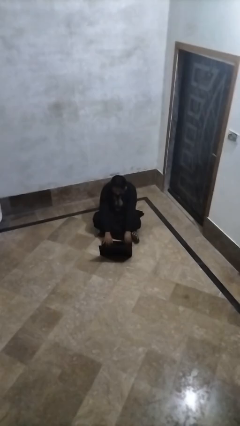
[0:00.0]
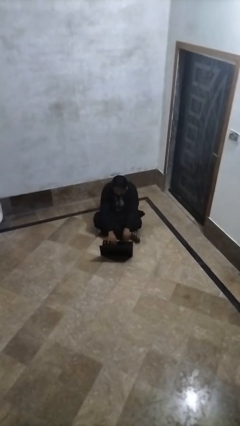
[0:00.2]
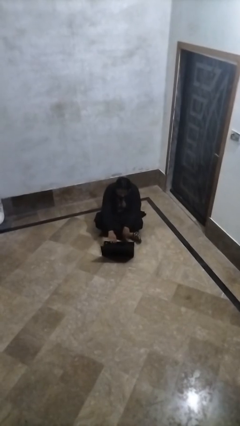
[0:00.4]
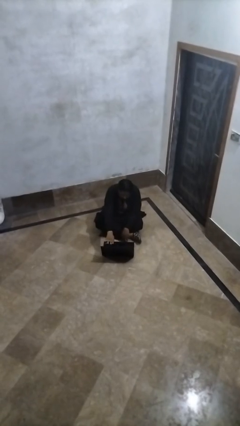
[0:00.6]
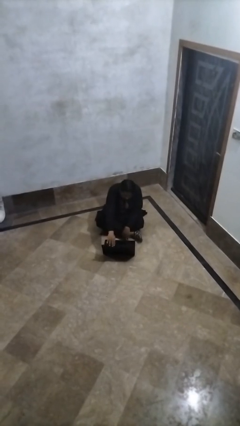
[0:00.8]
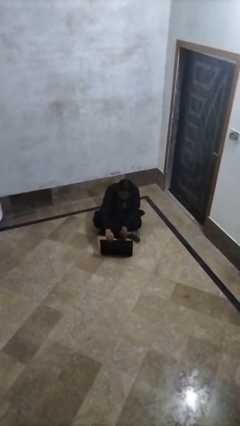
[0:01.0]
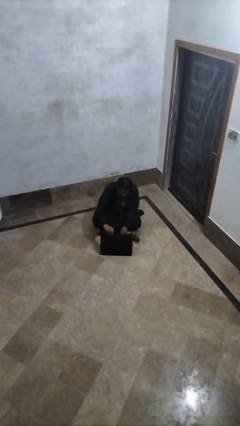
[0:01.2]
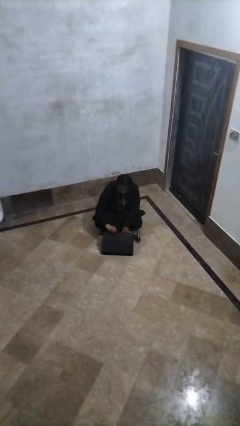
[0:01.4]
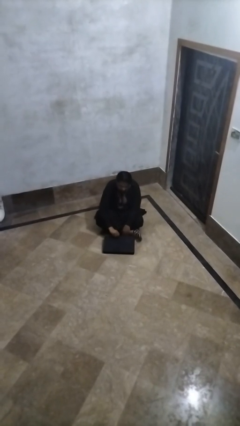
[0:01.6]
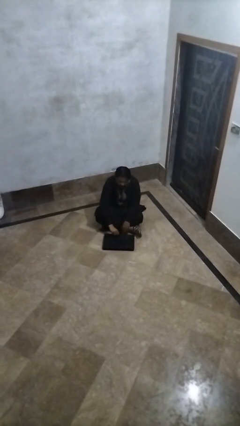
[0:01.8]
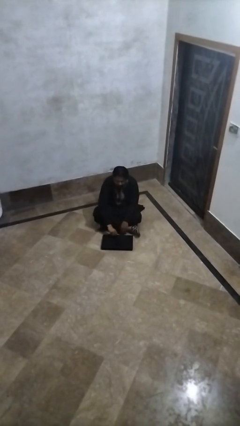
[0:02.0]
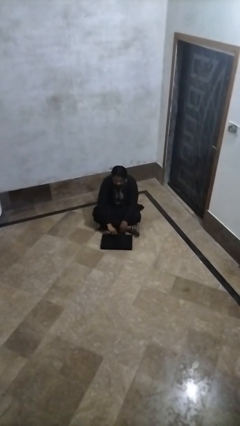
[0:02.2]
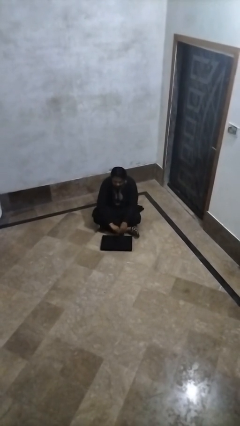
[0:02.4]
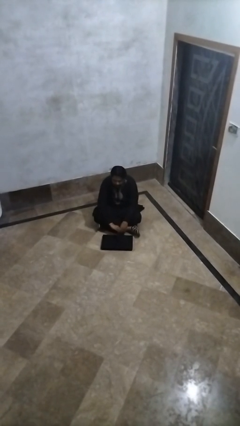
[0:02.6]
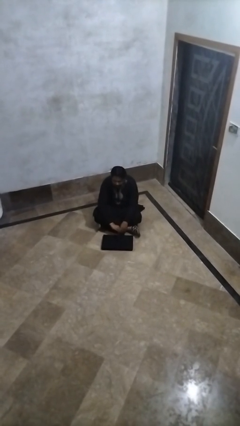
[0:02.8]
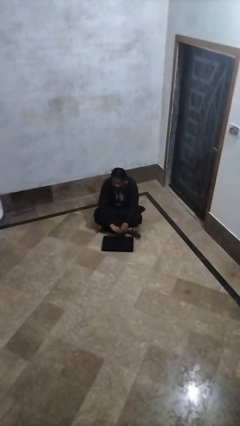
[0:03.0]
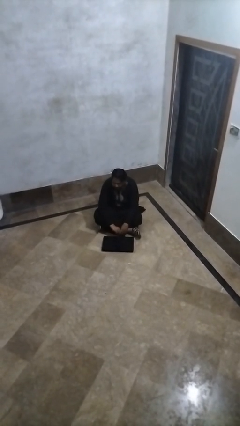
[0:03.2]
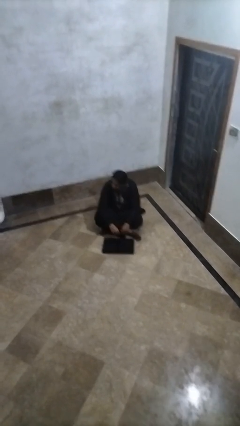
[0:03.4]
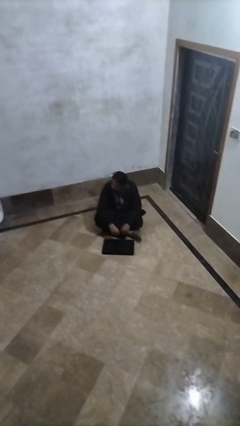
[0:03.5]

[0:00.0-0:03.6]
person closes laptop

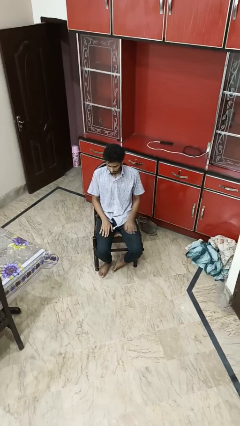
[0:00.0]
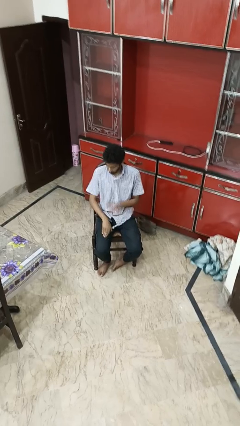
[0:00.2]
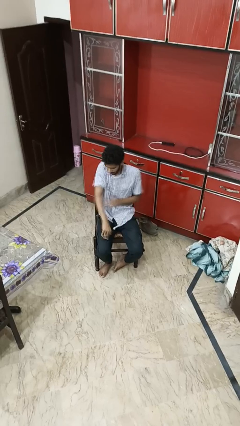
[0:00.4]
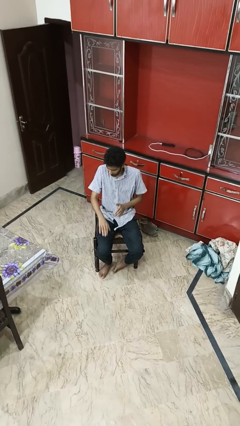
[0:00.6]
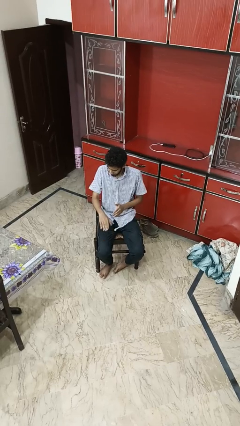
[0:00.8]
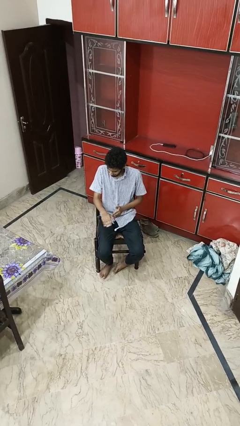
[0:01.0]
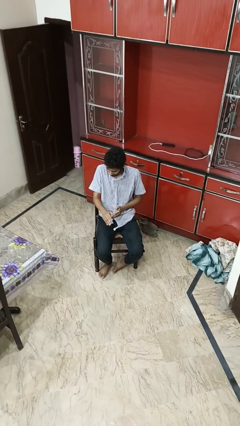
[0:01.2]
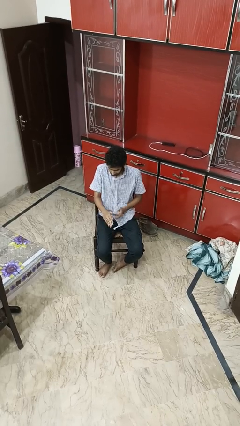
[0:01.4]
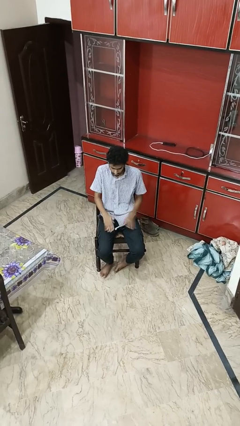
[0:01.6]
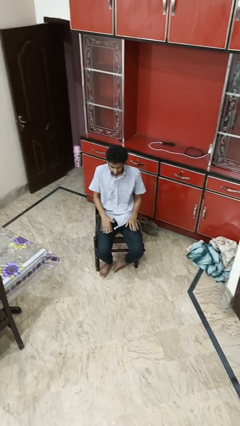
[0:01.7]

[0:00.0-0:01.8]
person swats bug

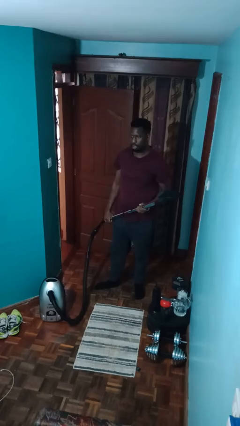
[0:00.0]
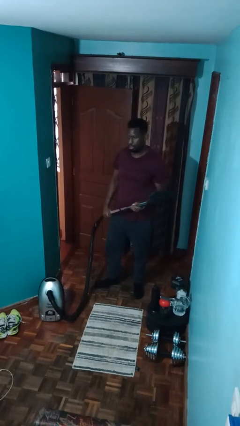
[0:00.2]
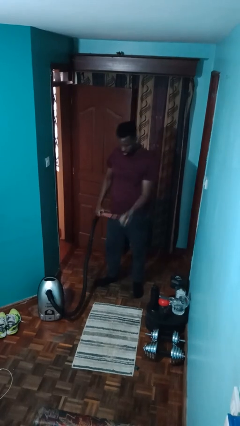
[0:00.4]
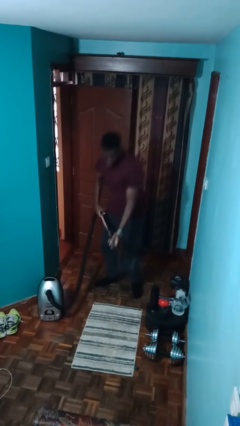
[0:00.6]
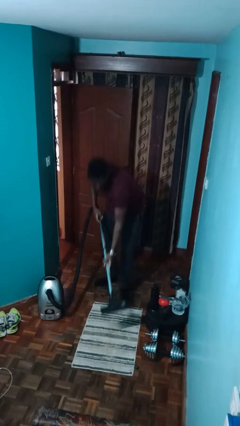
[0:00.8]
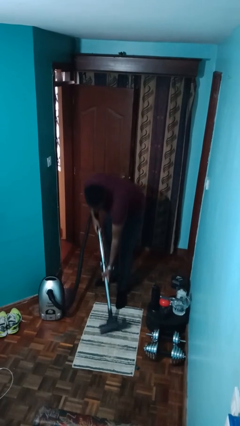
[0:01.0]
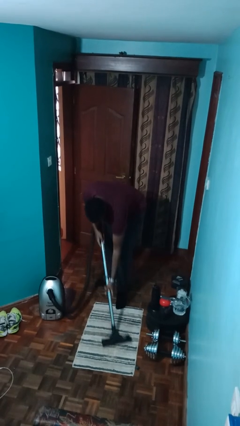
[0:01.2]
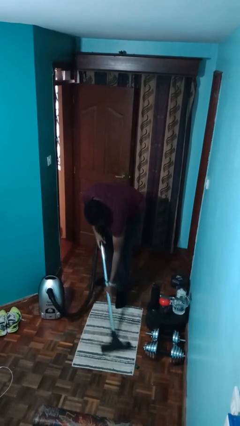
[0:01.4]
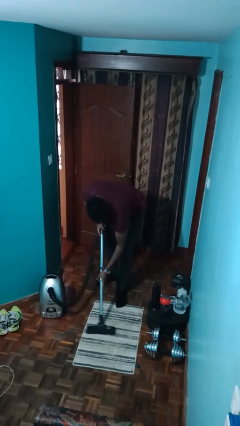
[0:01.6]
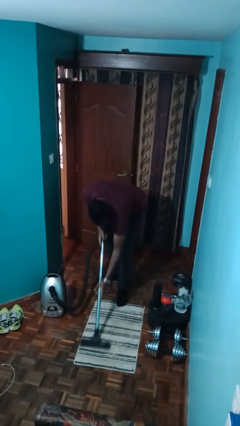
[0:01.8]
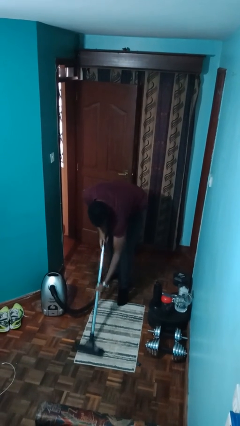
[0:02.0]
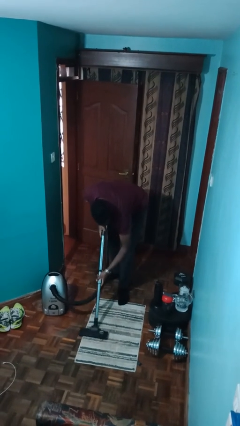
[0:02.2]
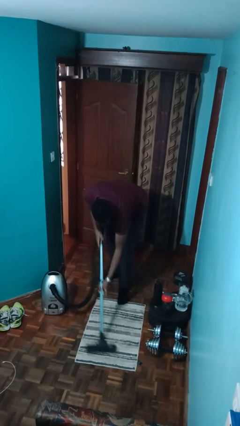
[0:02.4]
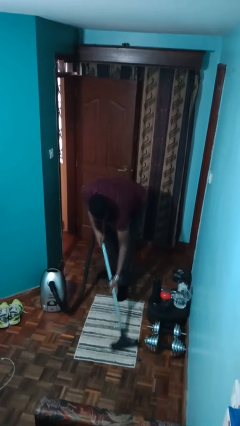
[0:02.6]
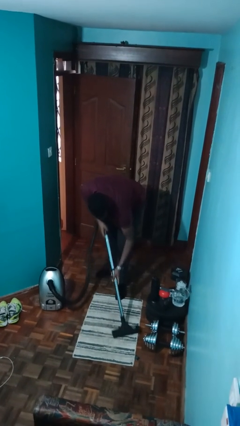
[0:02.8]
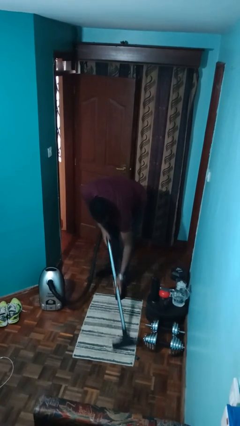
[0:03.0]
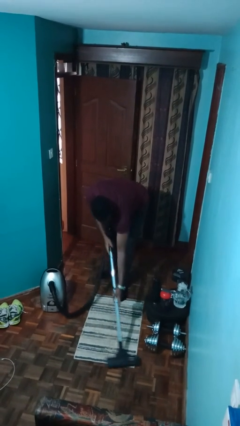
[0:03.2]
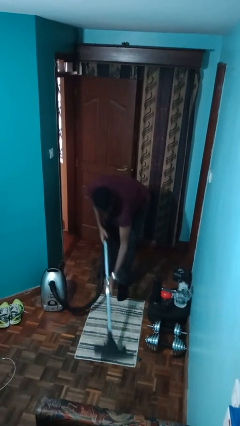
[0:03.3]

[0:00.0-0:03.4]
person vacuums carpet

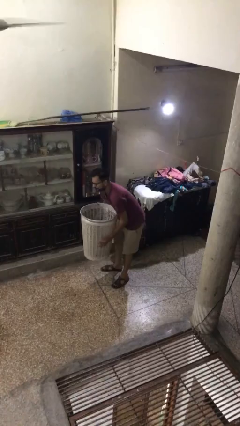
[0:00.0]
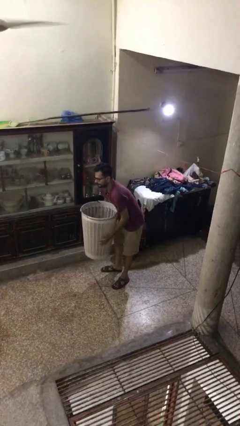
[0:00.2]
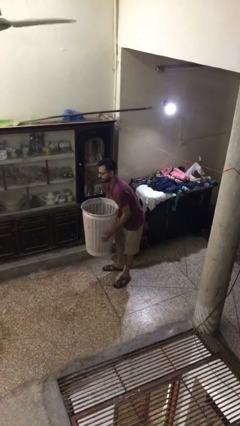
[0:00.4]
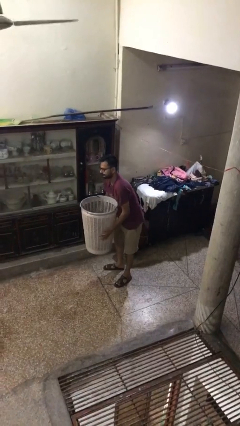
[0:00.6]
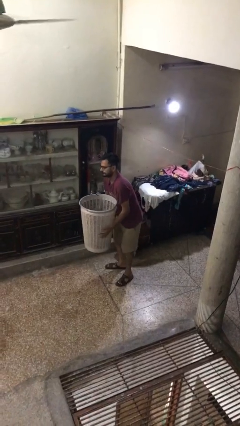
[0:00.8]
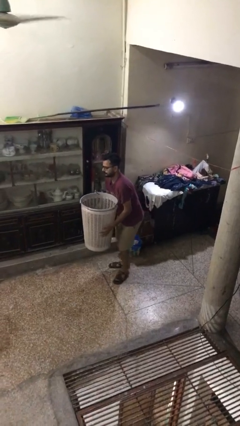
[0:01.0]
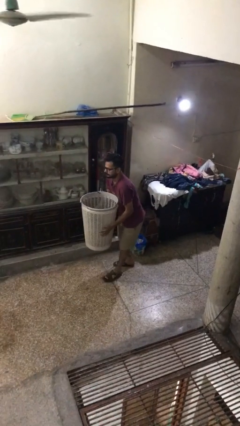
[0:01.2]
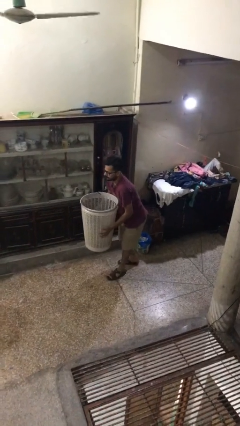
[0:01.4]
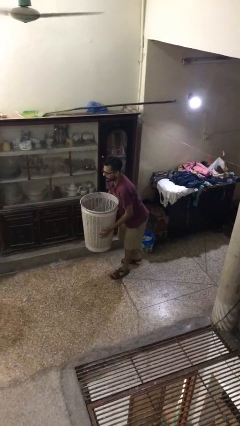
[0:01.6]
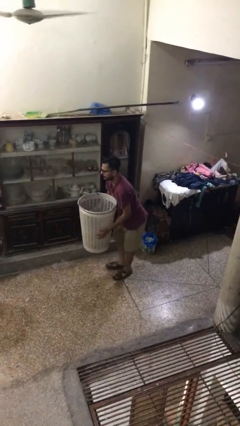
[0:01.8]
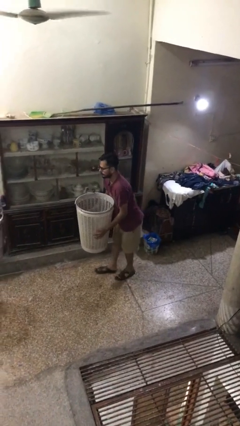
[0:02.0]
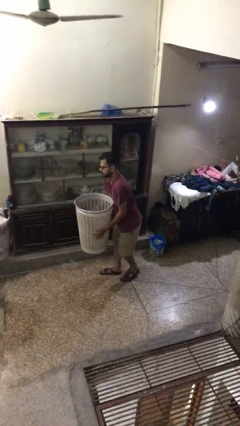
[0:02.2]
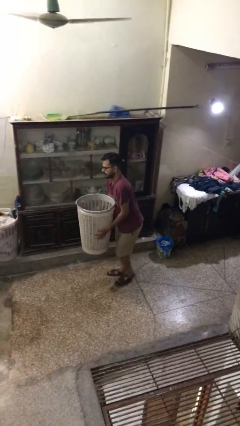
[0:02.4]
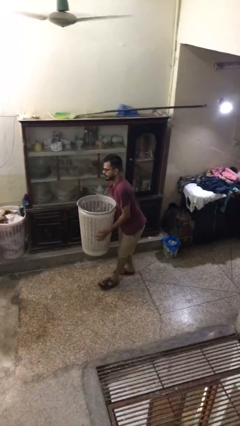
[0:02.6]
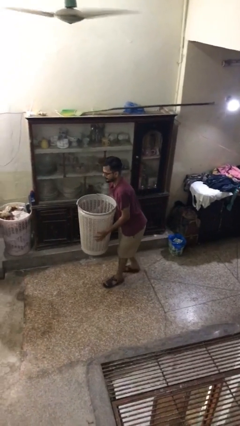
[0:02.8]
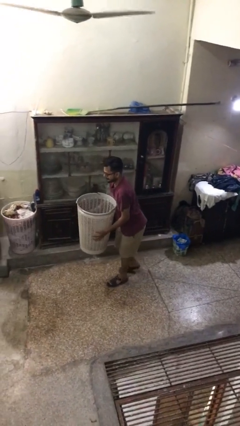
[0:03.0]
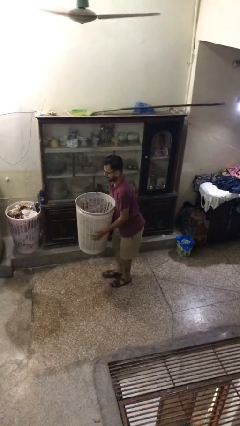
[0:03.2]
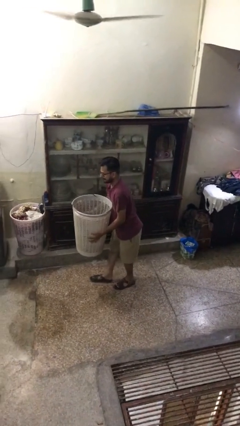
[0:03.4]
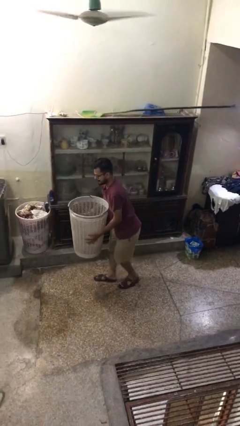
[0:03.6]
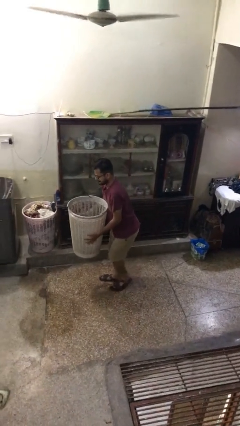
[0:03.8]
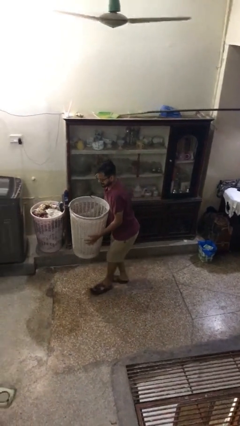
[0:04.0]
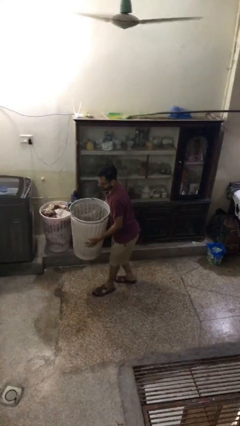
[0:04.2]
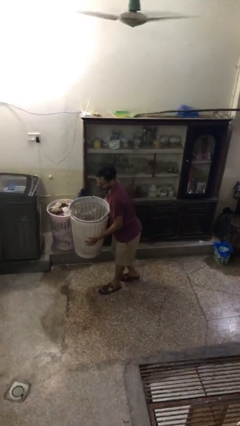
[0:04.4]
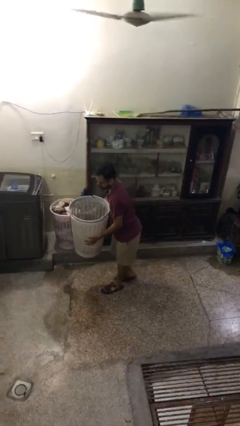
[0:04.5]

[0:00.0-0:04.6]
person carries heavy object

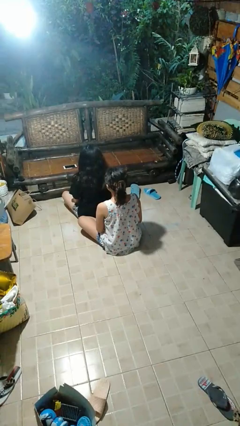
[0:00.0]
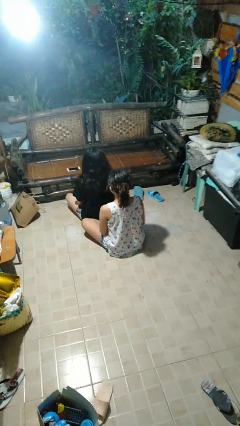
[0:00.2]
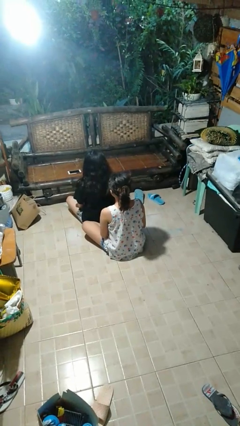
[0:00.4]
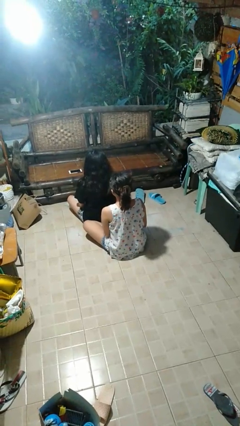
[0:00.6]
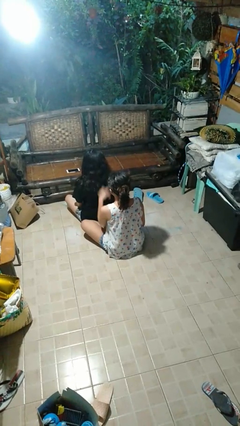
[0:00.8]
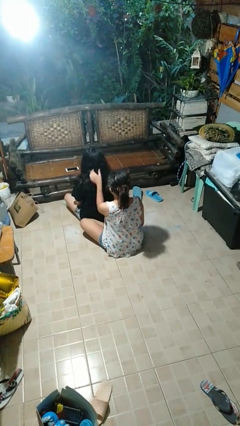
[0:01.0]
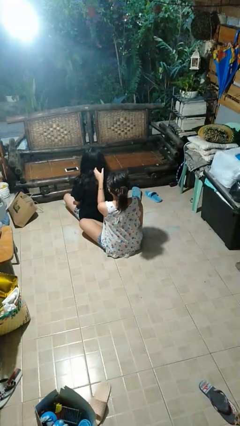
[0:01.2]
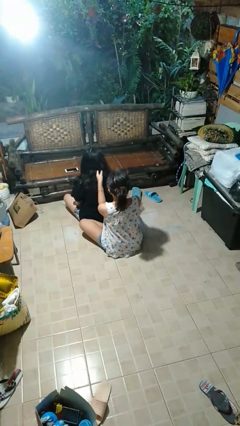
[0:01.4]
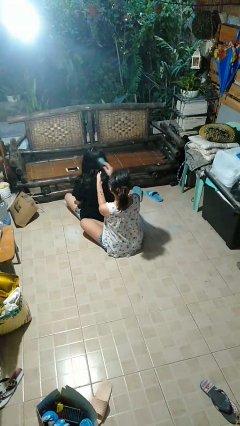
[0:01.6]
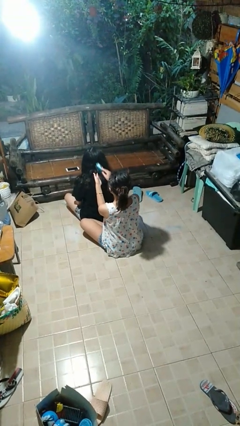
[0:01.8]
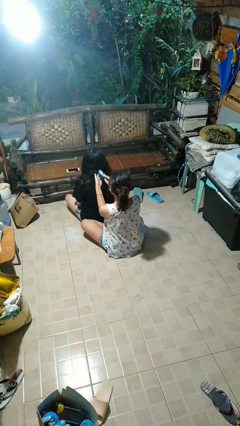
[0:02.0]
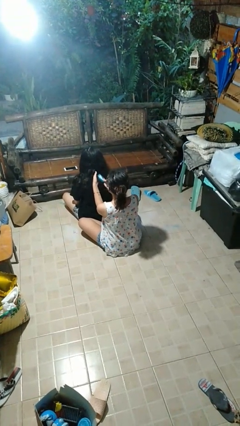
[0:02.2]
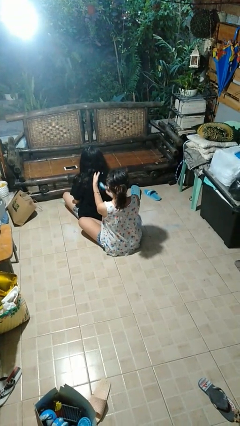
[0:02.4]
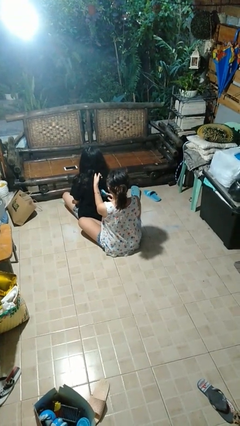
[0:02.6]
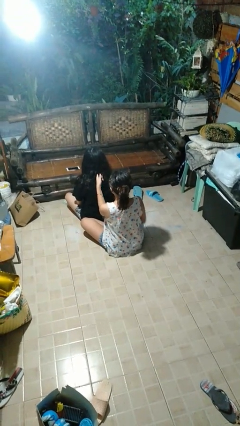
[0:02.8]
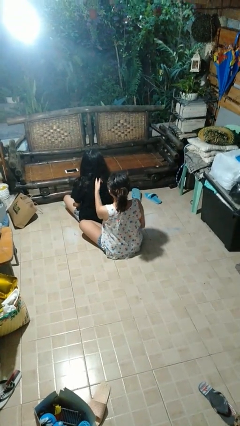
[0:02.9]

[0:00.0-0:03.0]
person brushes hair of person

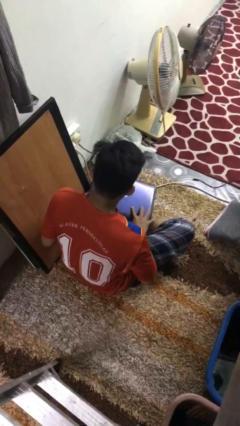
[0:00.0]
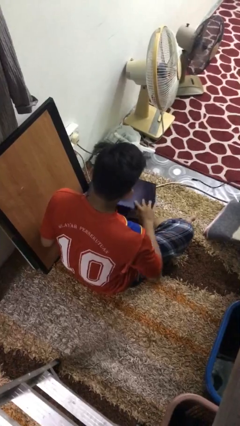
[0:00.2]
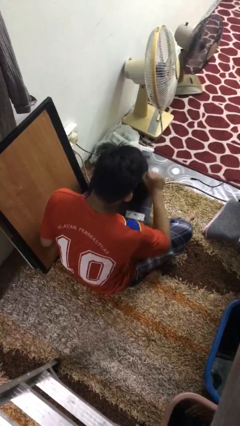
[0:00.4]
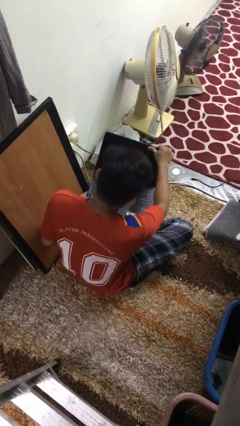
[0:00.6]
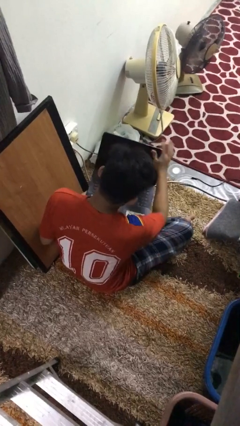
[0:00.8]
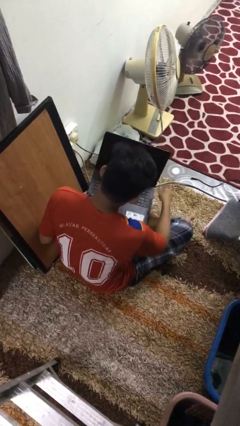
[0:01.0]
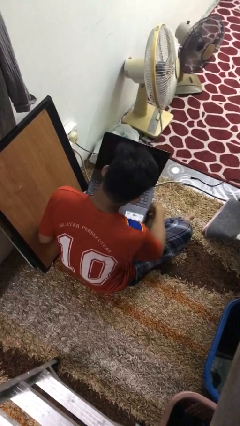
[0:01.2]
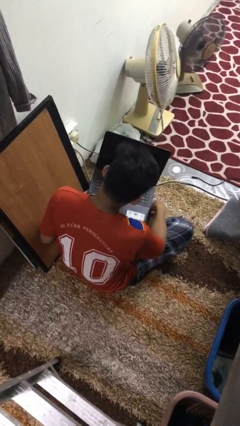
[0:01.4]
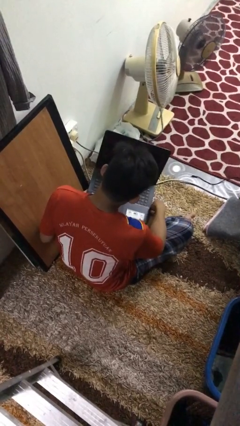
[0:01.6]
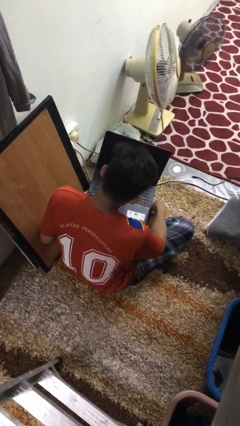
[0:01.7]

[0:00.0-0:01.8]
person opens laptop
